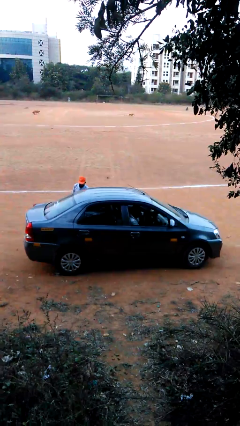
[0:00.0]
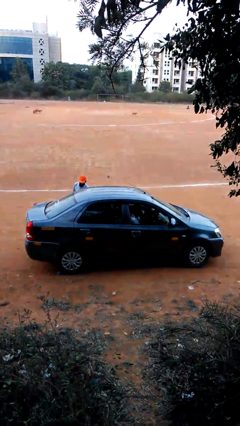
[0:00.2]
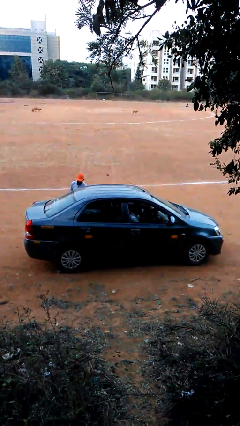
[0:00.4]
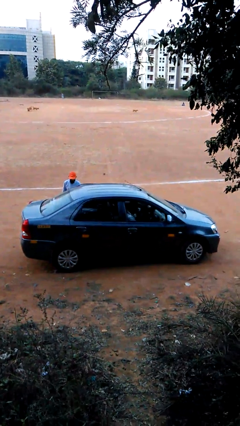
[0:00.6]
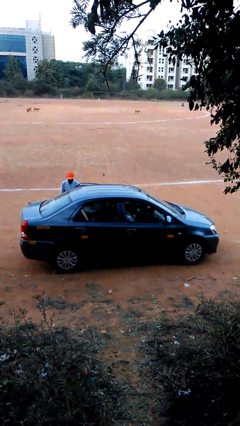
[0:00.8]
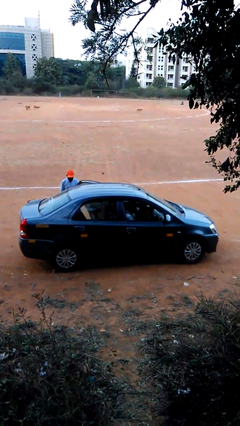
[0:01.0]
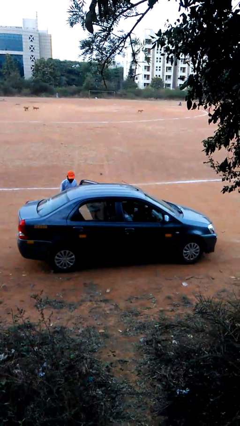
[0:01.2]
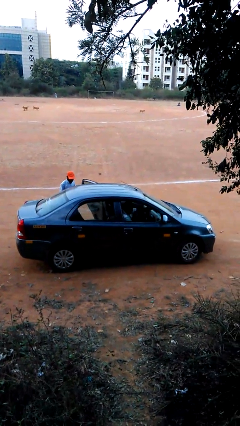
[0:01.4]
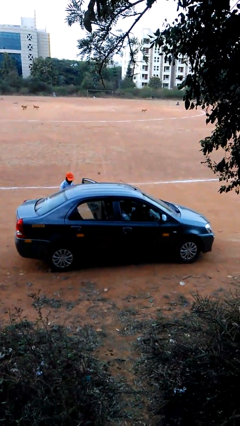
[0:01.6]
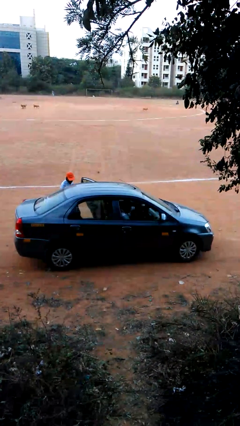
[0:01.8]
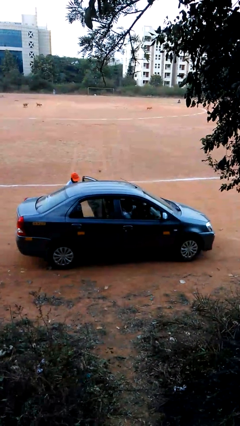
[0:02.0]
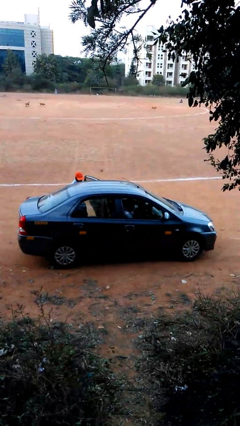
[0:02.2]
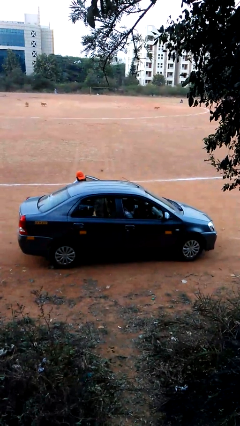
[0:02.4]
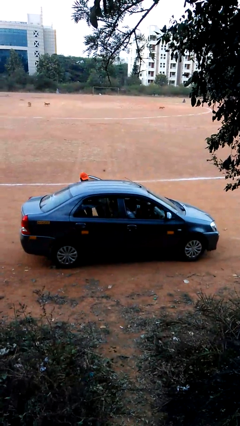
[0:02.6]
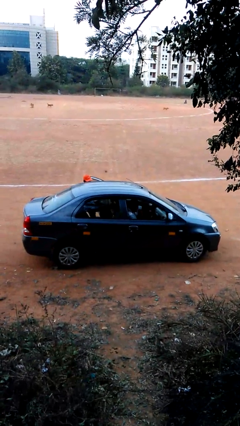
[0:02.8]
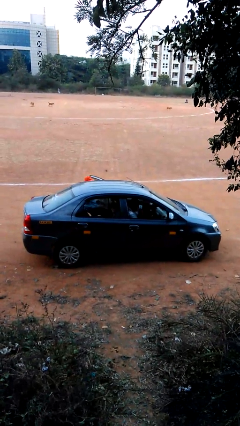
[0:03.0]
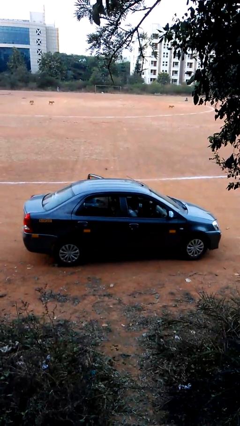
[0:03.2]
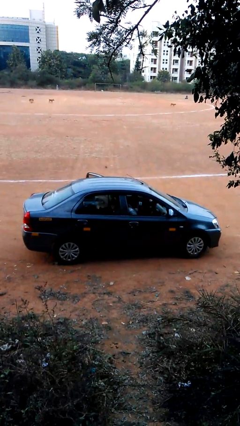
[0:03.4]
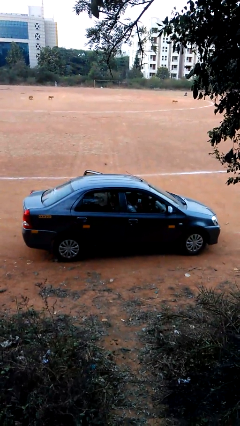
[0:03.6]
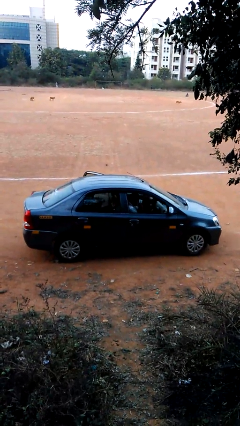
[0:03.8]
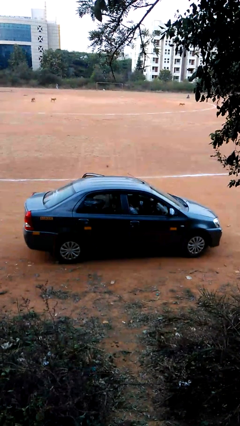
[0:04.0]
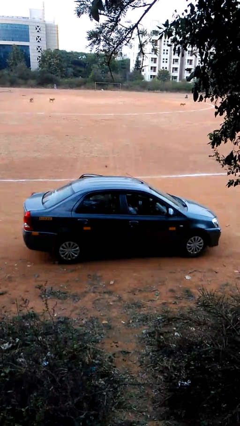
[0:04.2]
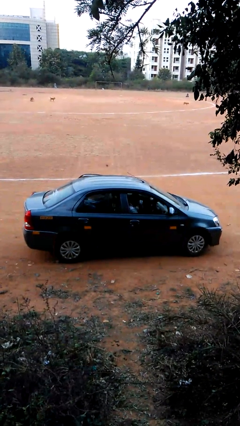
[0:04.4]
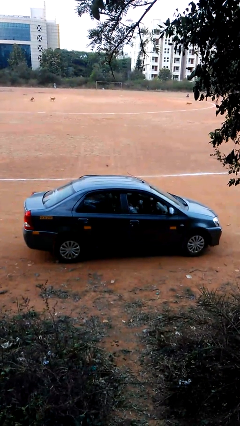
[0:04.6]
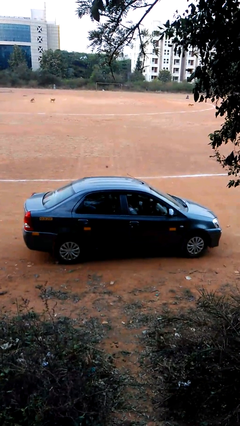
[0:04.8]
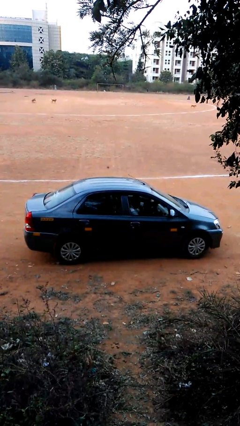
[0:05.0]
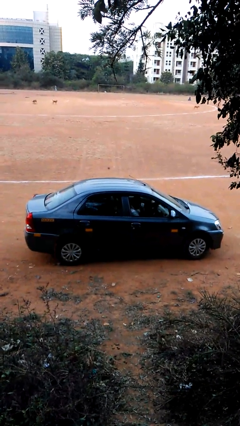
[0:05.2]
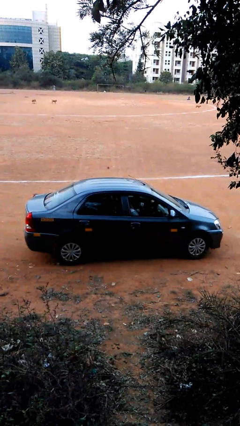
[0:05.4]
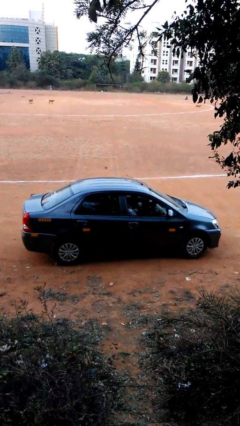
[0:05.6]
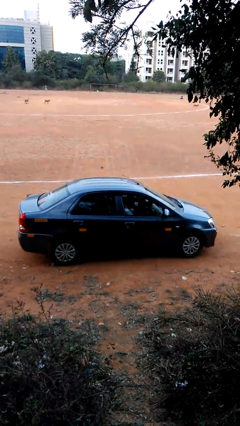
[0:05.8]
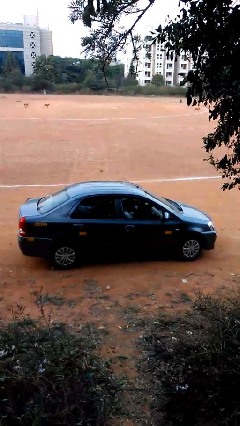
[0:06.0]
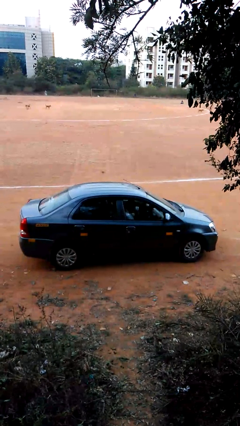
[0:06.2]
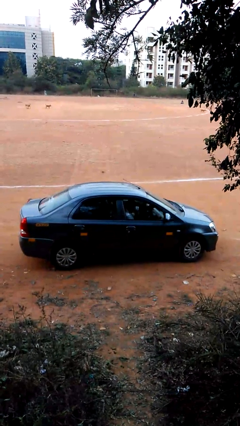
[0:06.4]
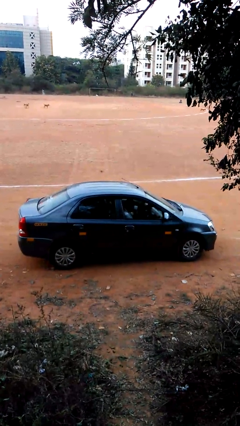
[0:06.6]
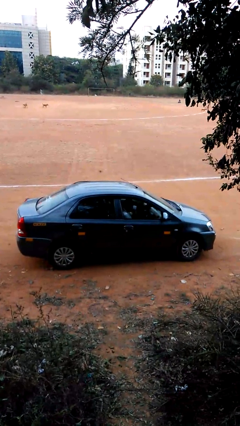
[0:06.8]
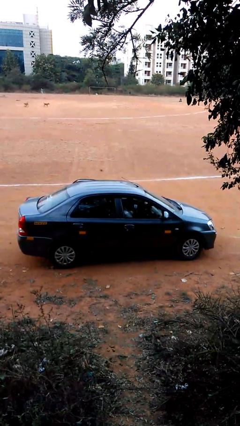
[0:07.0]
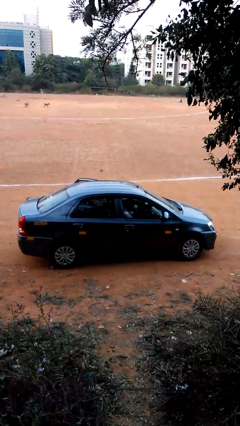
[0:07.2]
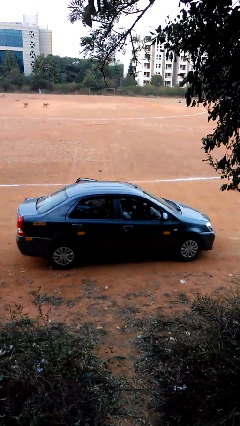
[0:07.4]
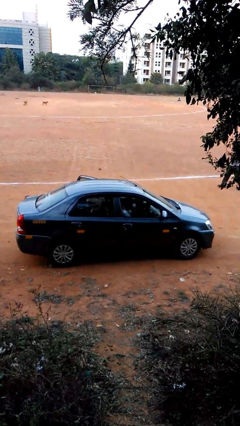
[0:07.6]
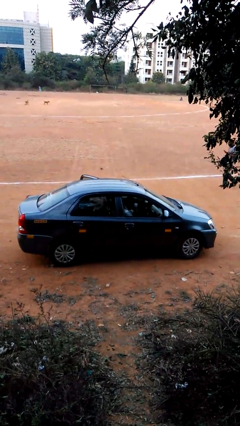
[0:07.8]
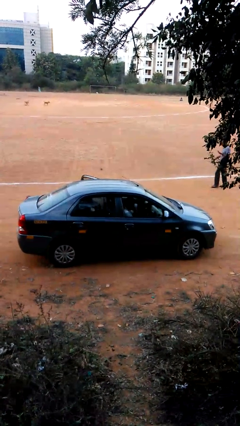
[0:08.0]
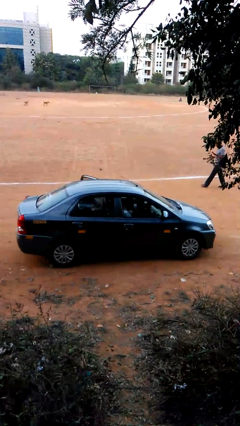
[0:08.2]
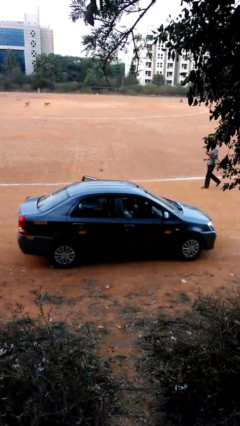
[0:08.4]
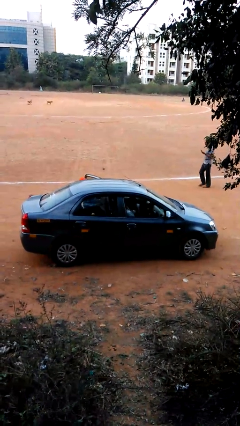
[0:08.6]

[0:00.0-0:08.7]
car picks up person

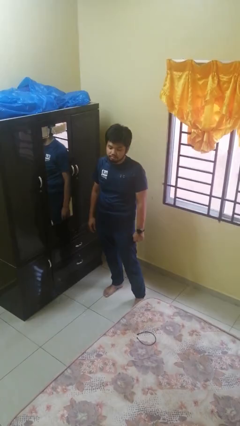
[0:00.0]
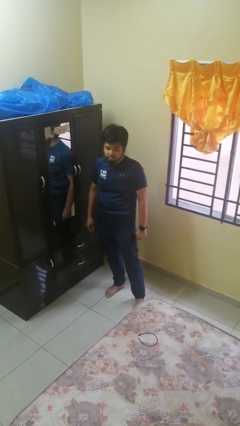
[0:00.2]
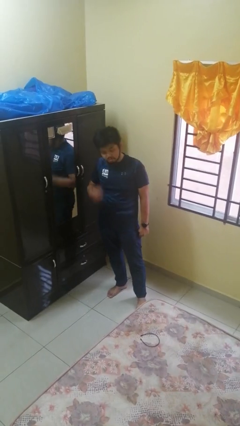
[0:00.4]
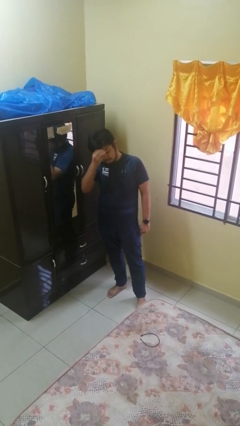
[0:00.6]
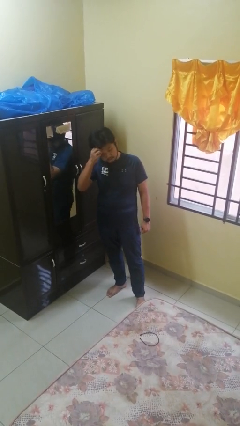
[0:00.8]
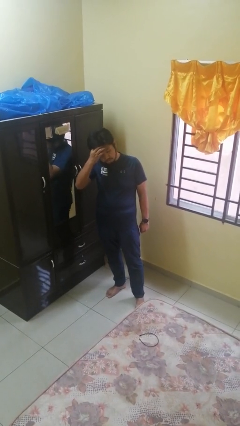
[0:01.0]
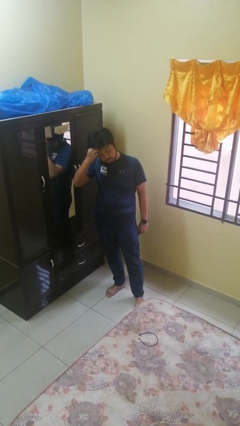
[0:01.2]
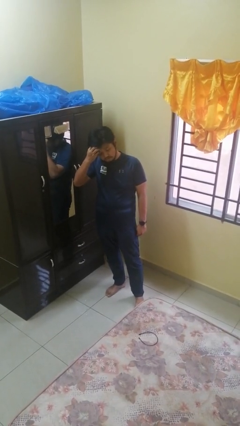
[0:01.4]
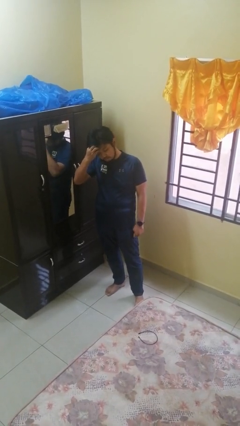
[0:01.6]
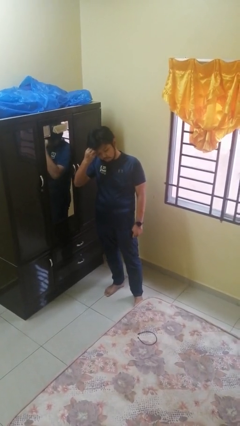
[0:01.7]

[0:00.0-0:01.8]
person scratches face

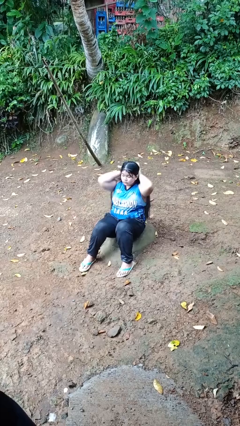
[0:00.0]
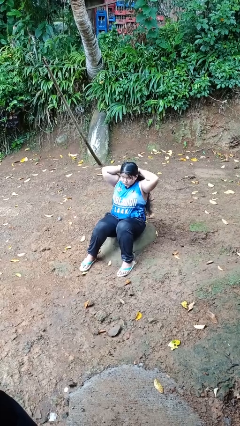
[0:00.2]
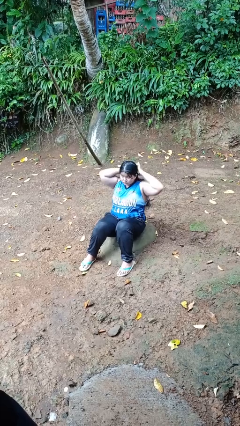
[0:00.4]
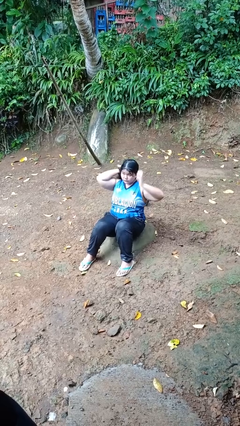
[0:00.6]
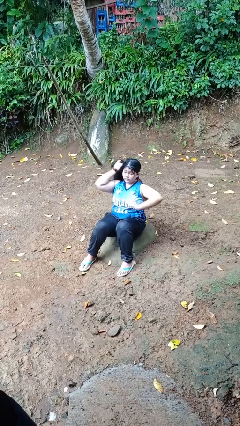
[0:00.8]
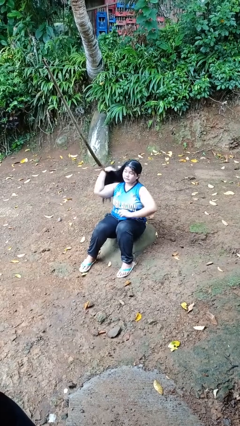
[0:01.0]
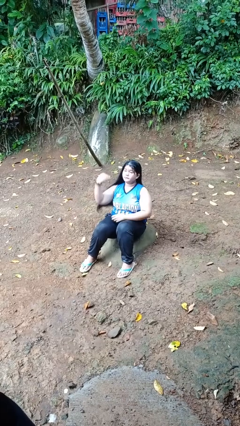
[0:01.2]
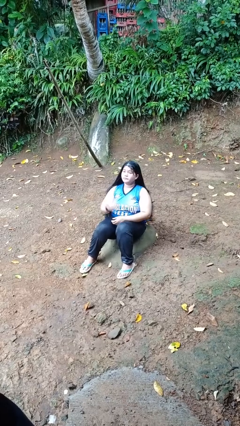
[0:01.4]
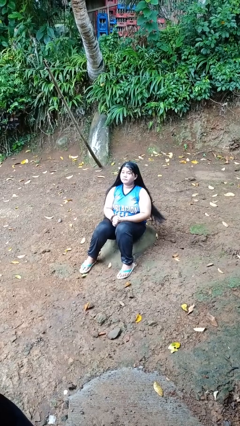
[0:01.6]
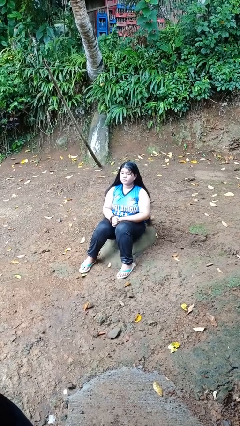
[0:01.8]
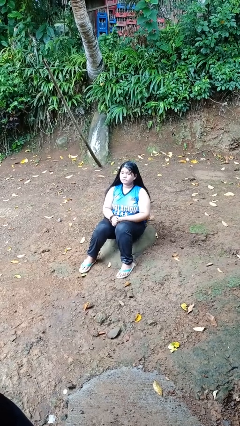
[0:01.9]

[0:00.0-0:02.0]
person strokes hair

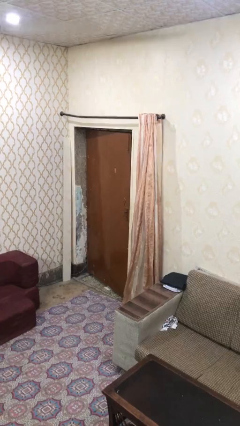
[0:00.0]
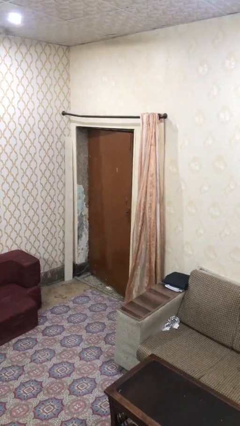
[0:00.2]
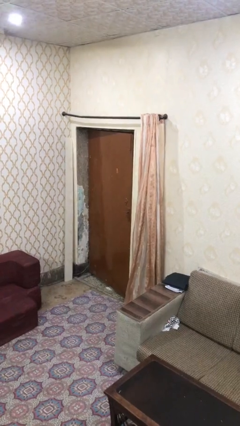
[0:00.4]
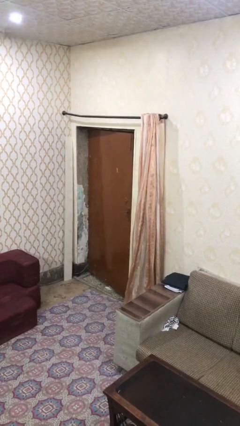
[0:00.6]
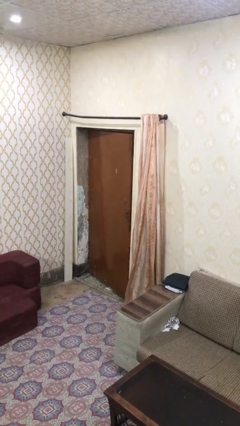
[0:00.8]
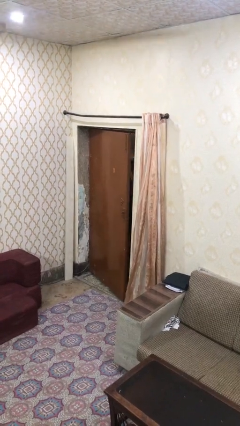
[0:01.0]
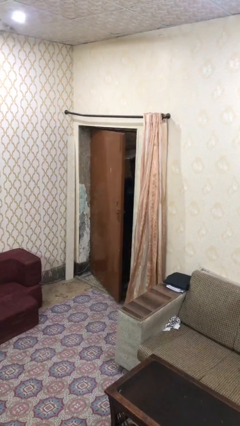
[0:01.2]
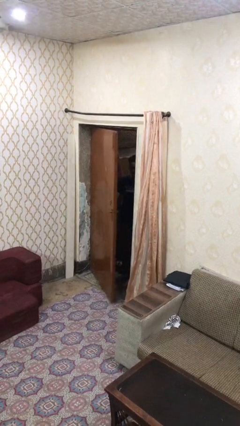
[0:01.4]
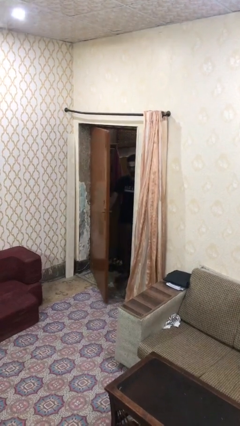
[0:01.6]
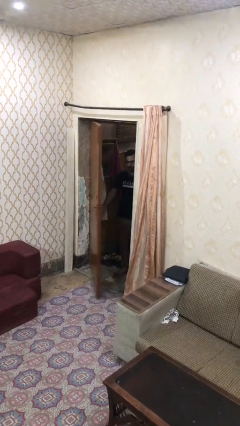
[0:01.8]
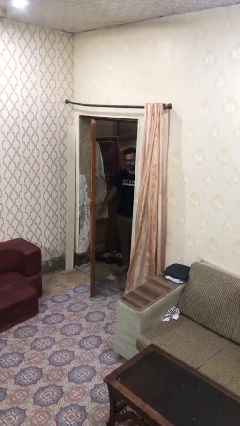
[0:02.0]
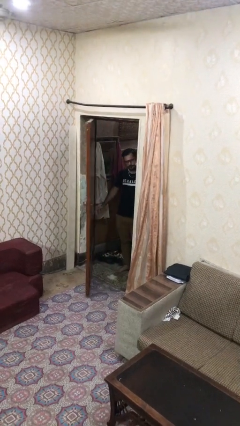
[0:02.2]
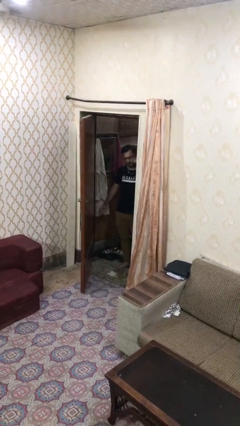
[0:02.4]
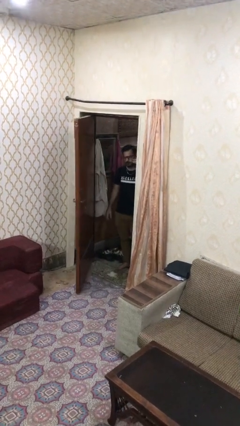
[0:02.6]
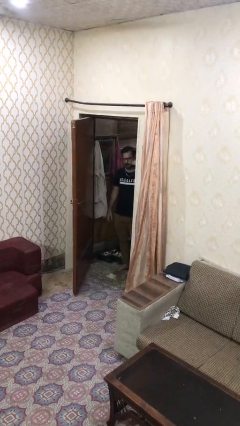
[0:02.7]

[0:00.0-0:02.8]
person opens facility door

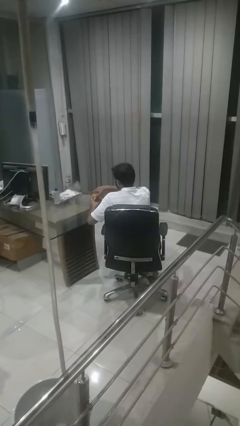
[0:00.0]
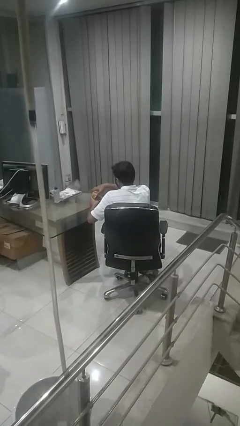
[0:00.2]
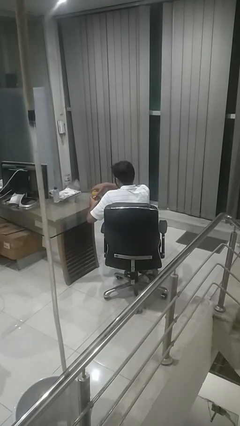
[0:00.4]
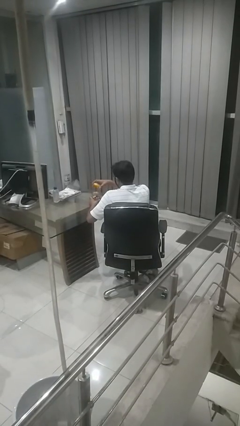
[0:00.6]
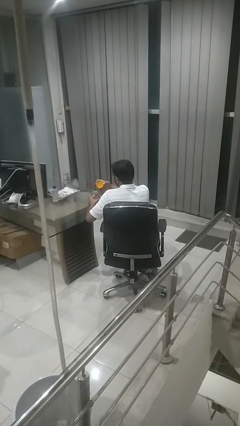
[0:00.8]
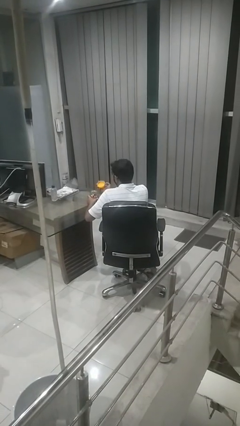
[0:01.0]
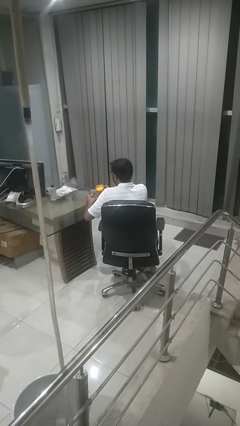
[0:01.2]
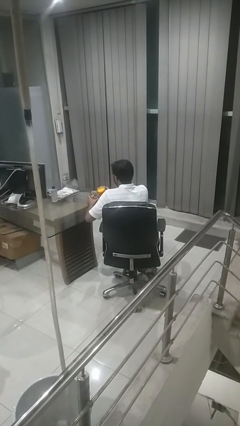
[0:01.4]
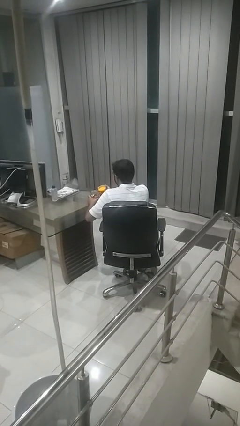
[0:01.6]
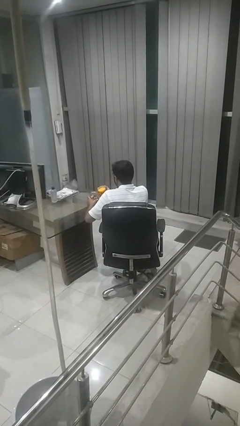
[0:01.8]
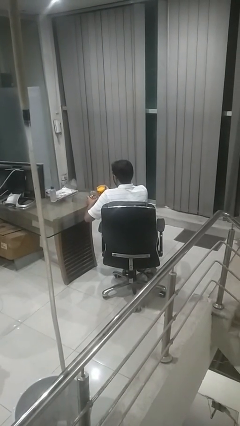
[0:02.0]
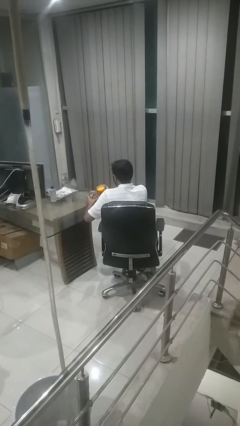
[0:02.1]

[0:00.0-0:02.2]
person opens jar
